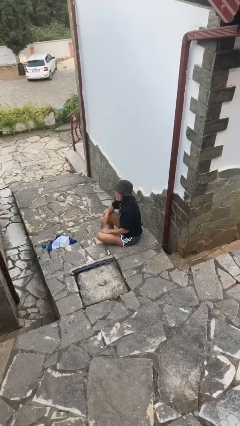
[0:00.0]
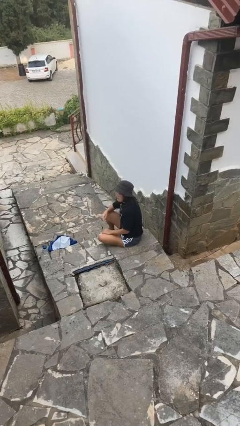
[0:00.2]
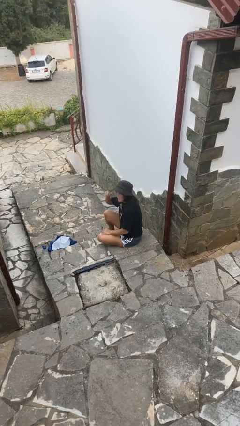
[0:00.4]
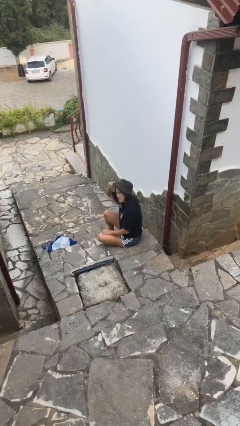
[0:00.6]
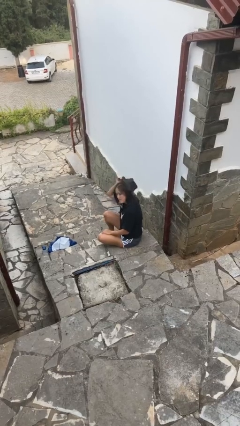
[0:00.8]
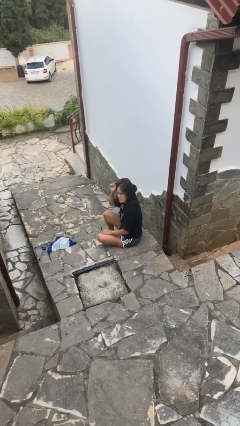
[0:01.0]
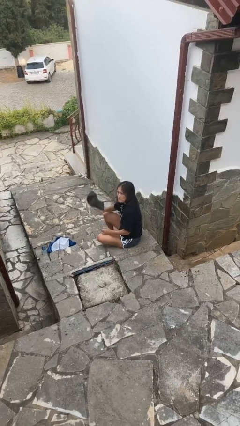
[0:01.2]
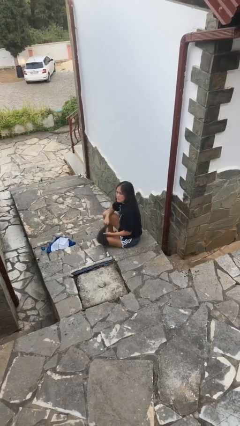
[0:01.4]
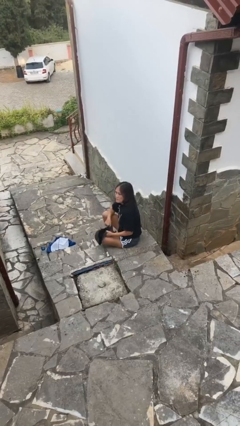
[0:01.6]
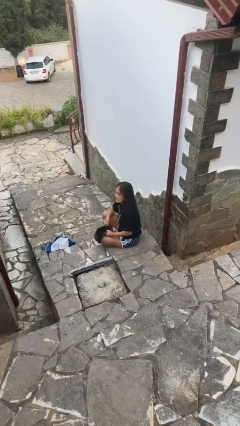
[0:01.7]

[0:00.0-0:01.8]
person takes off hat

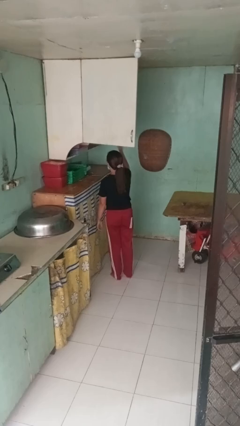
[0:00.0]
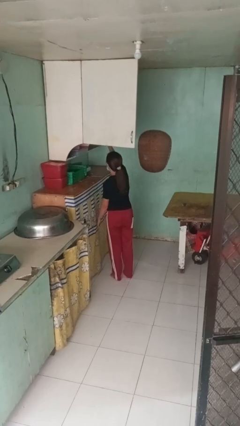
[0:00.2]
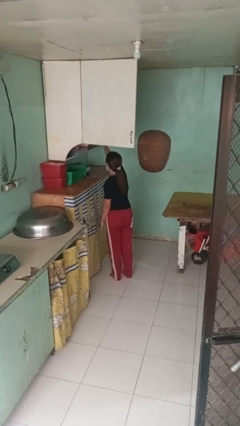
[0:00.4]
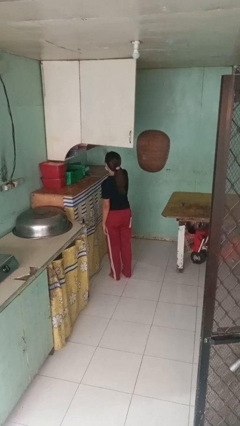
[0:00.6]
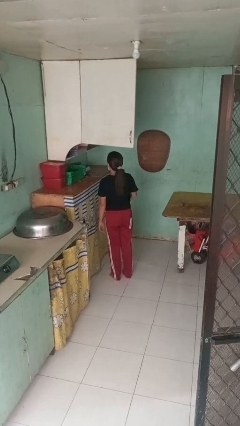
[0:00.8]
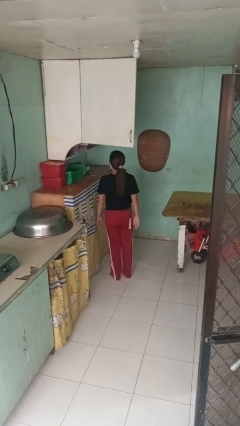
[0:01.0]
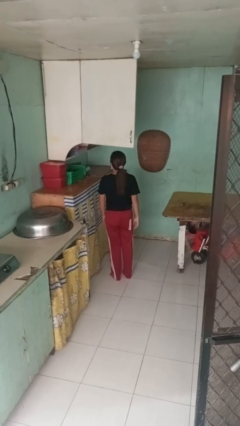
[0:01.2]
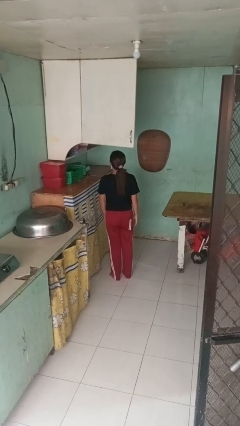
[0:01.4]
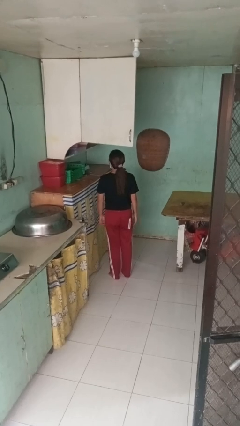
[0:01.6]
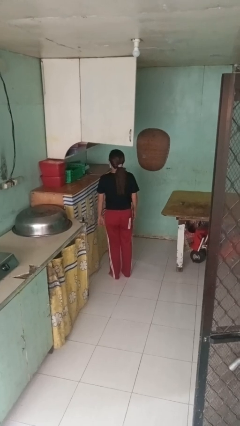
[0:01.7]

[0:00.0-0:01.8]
person puts object in cabinet

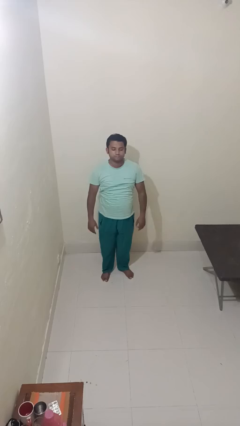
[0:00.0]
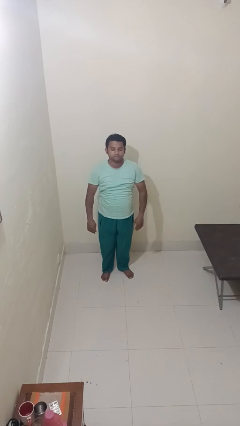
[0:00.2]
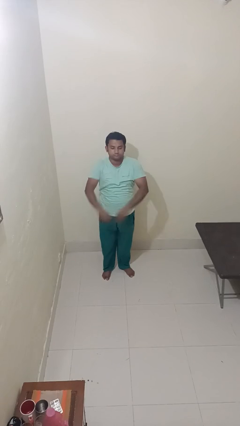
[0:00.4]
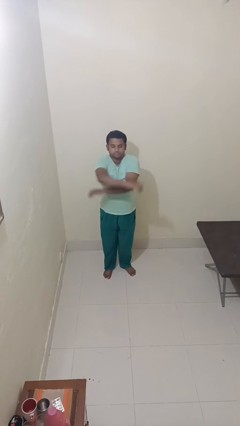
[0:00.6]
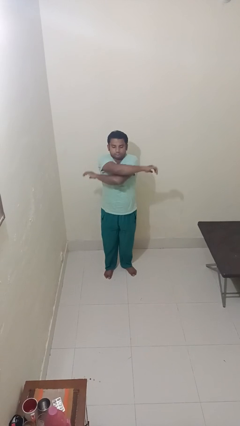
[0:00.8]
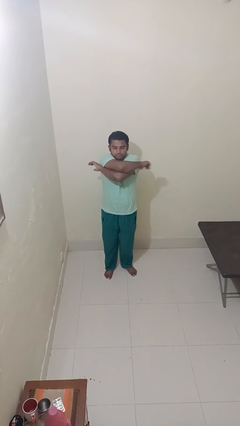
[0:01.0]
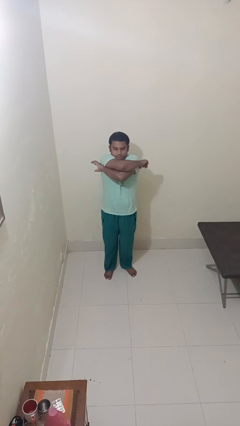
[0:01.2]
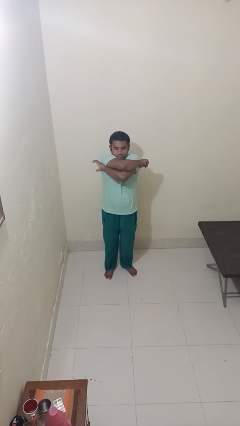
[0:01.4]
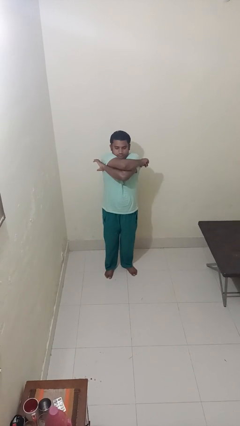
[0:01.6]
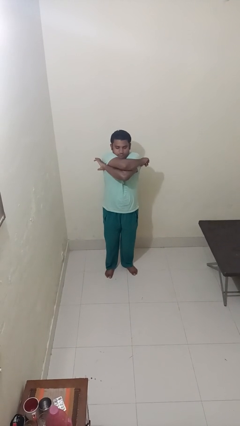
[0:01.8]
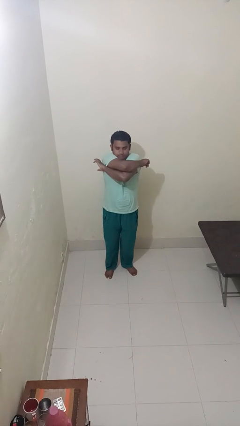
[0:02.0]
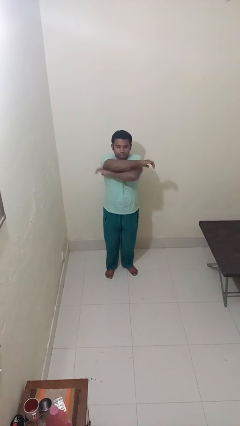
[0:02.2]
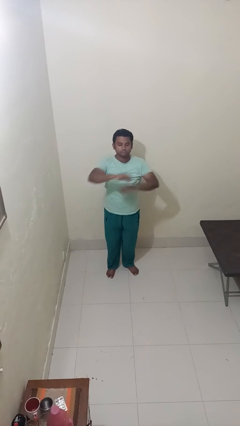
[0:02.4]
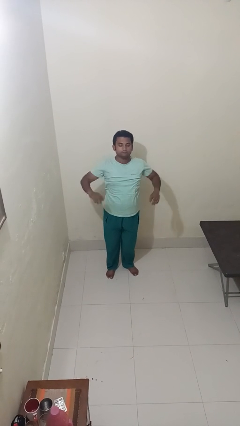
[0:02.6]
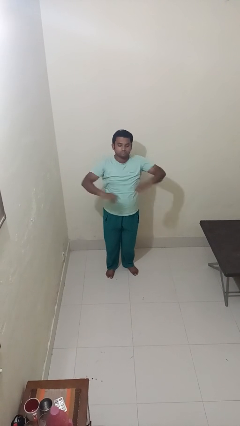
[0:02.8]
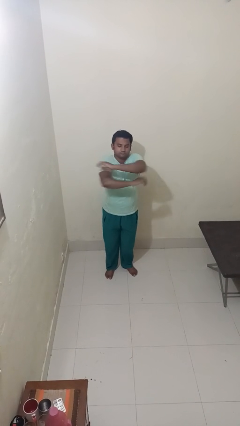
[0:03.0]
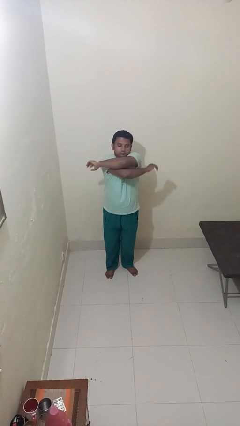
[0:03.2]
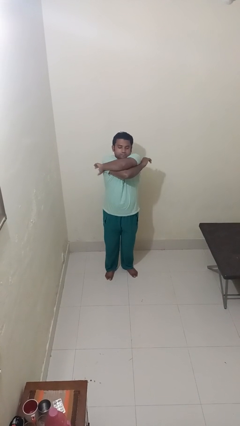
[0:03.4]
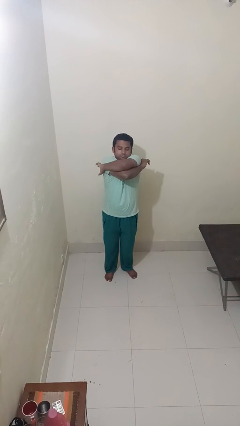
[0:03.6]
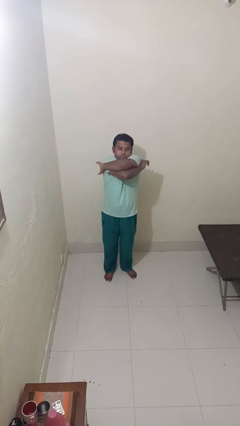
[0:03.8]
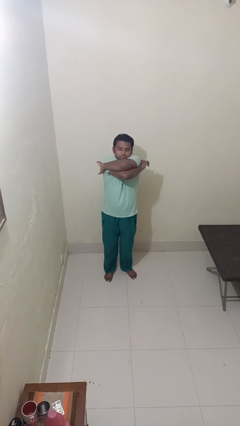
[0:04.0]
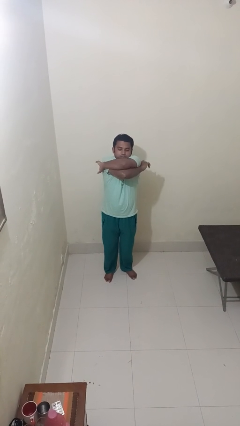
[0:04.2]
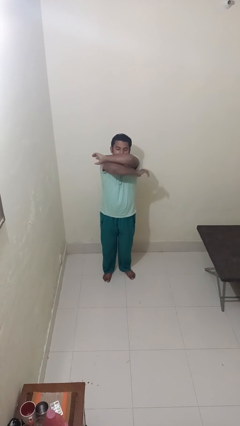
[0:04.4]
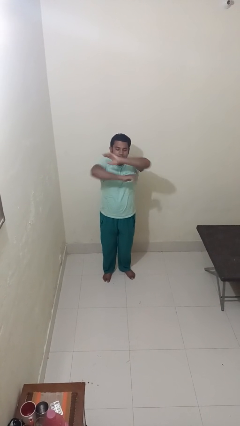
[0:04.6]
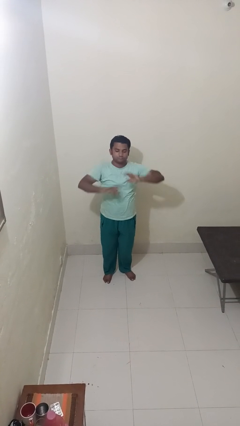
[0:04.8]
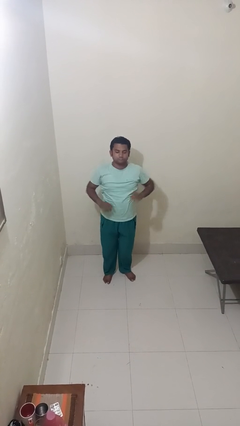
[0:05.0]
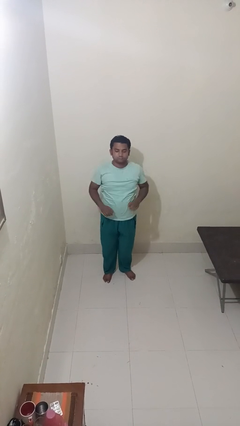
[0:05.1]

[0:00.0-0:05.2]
person stretches arms to side

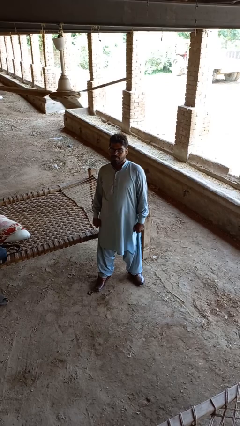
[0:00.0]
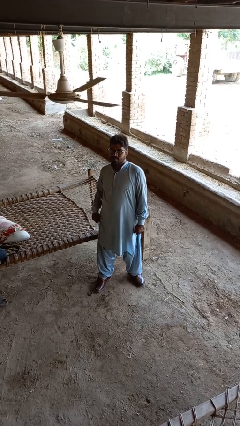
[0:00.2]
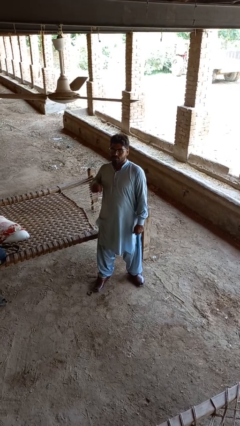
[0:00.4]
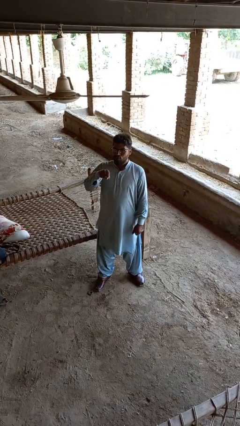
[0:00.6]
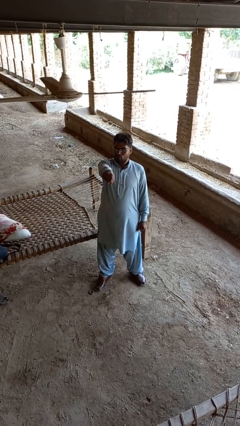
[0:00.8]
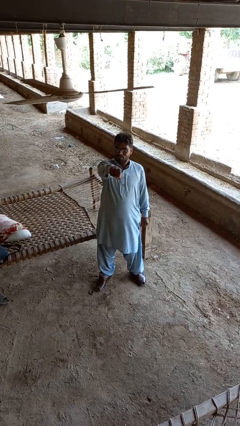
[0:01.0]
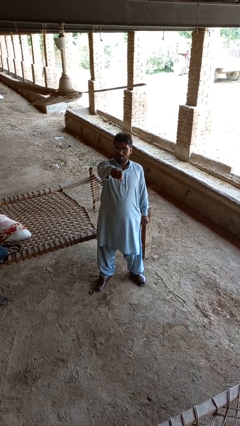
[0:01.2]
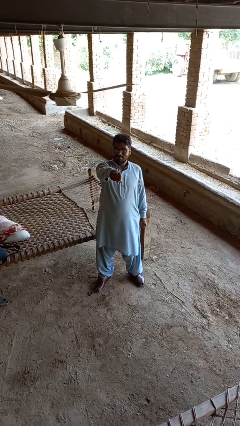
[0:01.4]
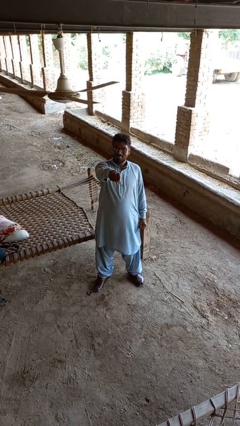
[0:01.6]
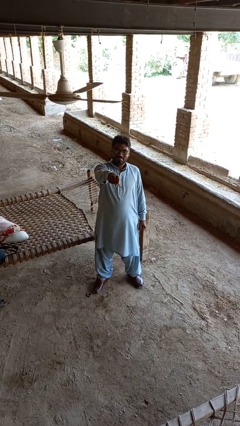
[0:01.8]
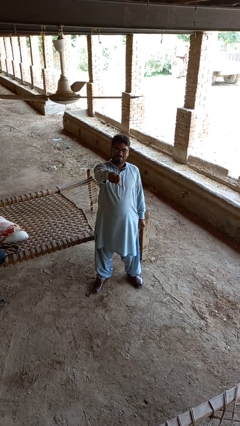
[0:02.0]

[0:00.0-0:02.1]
person punches

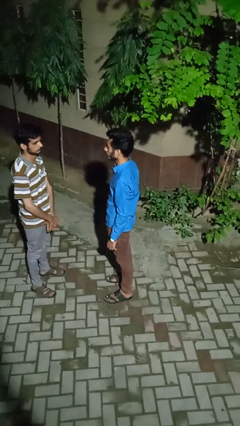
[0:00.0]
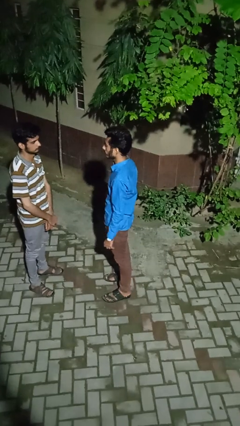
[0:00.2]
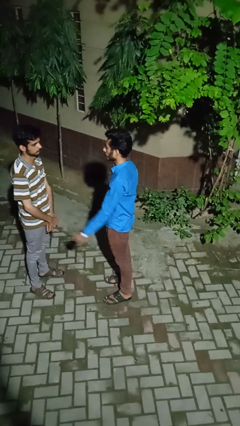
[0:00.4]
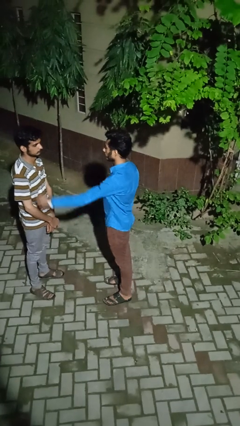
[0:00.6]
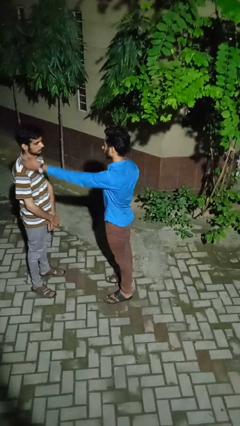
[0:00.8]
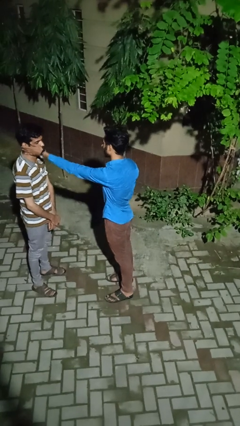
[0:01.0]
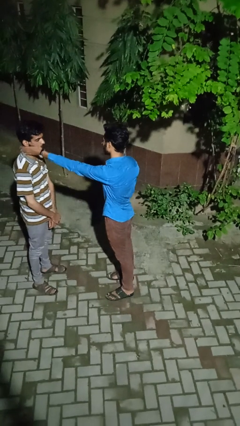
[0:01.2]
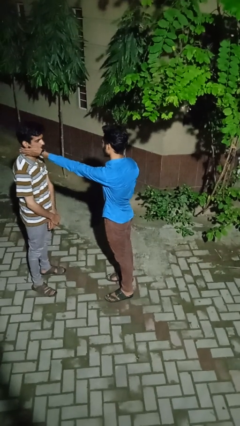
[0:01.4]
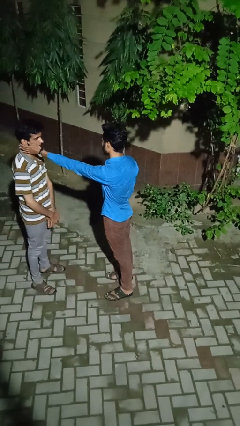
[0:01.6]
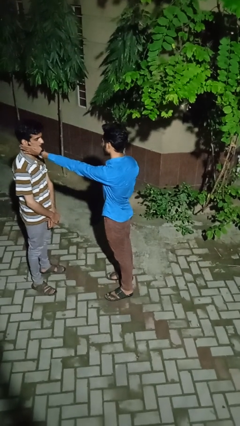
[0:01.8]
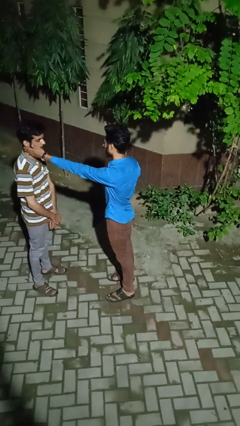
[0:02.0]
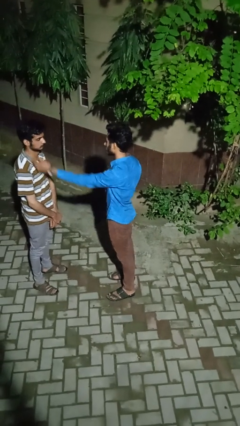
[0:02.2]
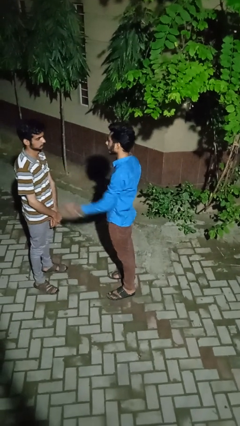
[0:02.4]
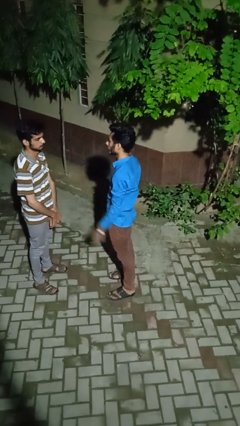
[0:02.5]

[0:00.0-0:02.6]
person touches face of person

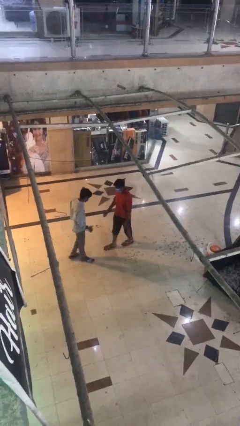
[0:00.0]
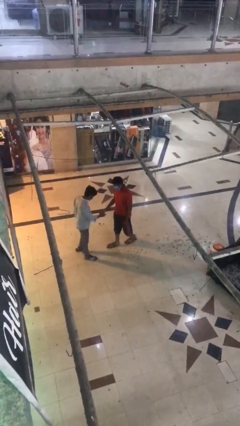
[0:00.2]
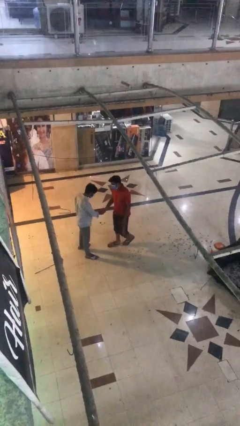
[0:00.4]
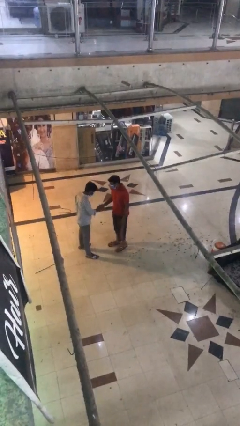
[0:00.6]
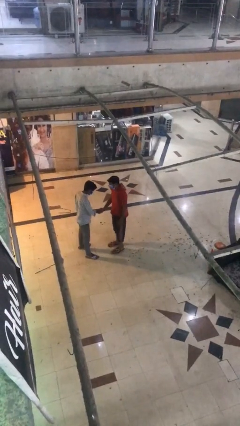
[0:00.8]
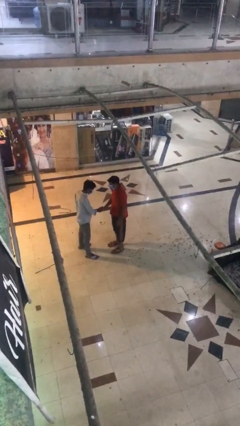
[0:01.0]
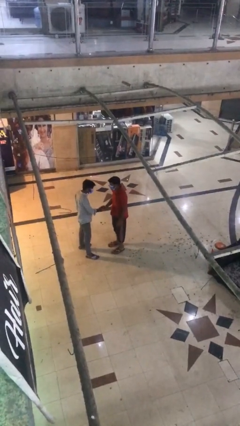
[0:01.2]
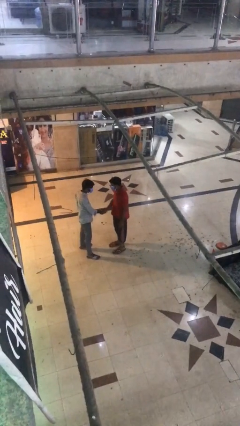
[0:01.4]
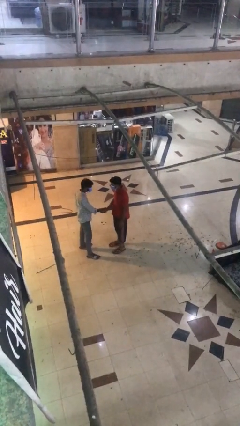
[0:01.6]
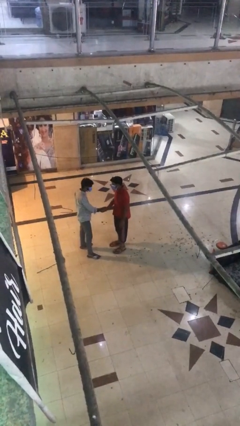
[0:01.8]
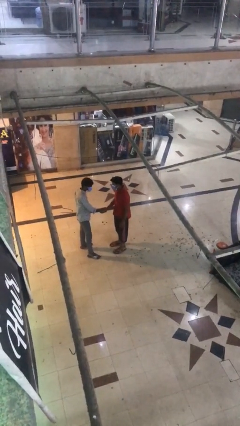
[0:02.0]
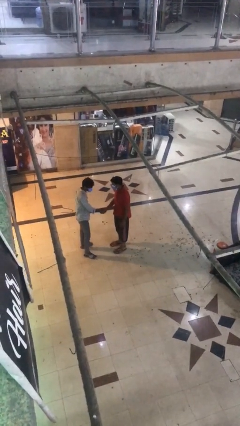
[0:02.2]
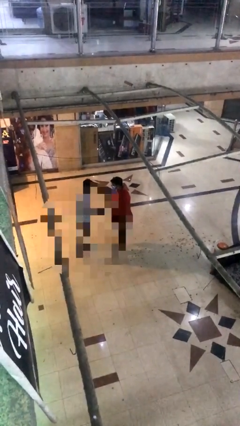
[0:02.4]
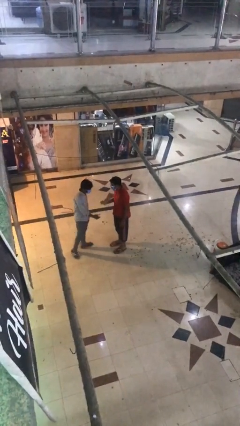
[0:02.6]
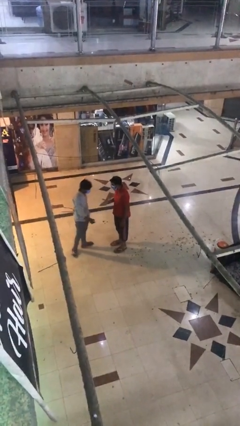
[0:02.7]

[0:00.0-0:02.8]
person shakes hand

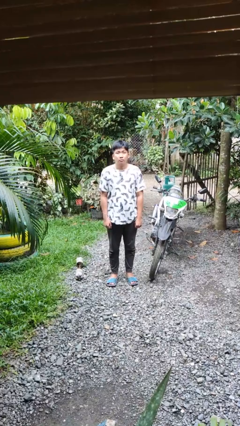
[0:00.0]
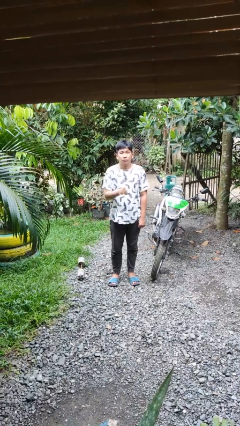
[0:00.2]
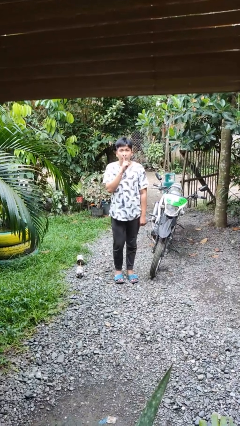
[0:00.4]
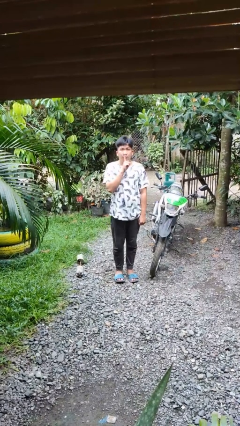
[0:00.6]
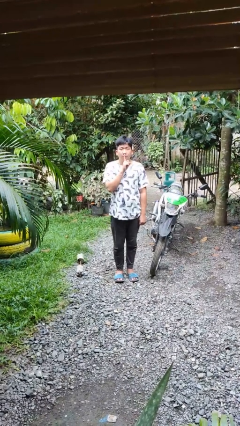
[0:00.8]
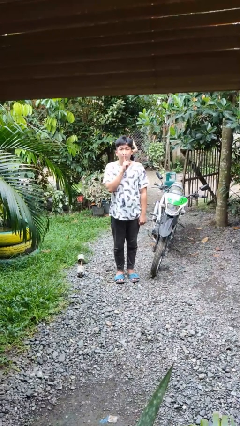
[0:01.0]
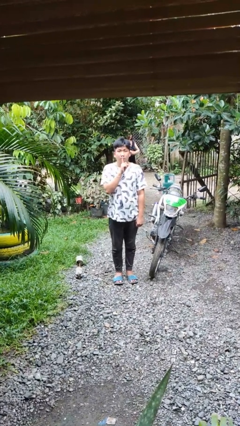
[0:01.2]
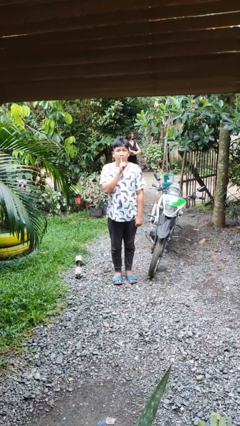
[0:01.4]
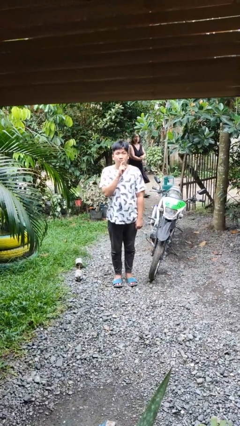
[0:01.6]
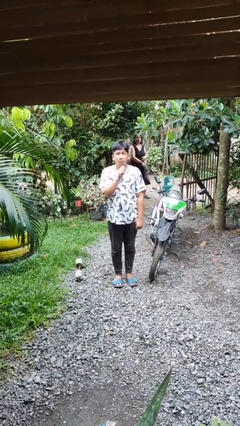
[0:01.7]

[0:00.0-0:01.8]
person gestures be quiet
